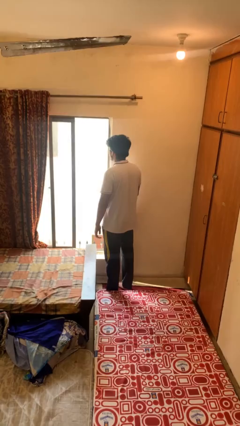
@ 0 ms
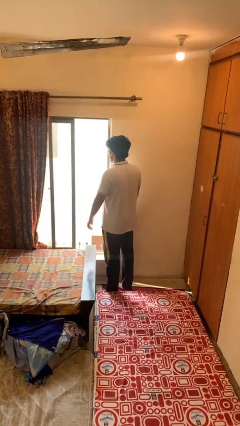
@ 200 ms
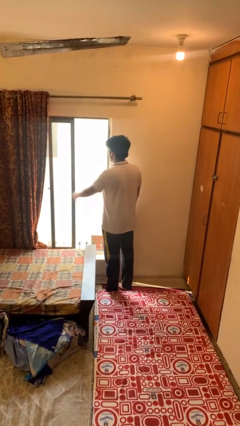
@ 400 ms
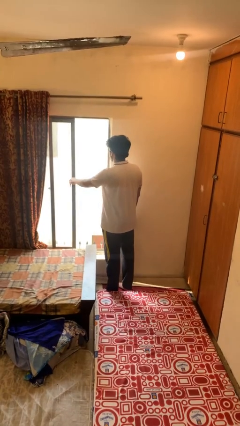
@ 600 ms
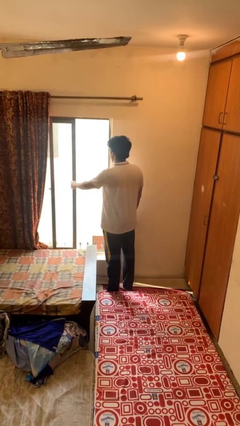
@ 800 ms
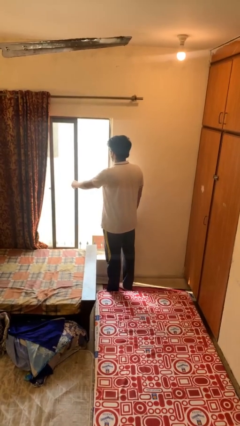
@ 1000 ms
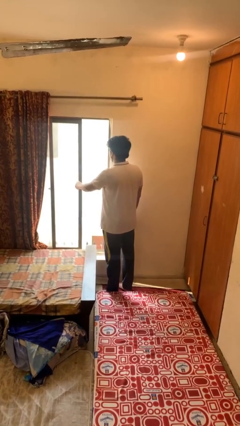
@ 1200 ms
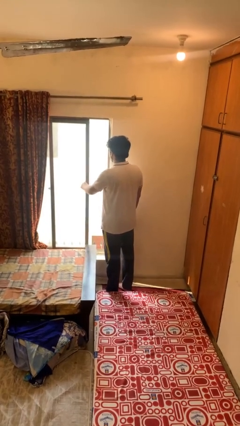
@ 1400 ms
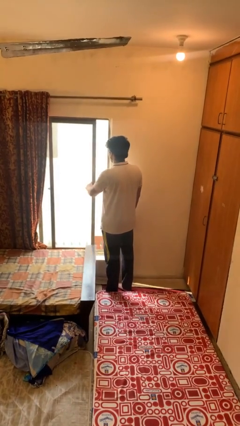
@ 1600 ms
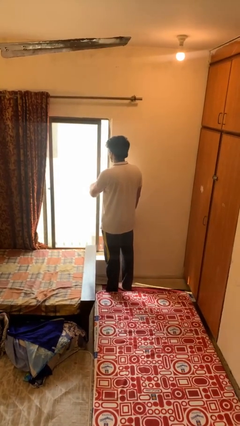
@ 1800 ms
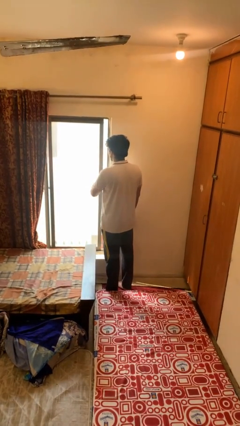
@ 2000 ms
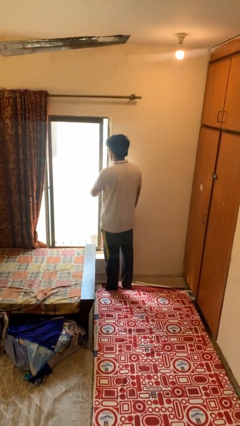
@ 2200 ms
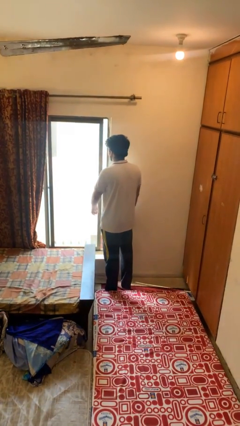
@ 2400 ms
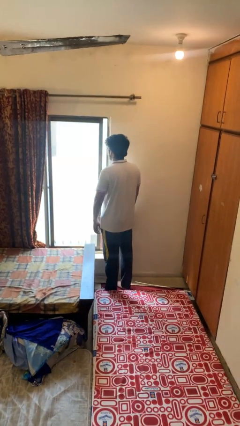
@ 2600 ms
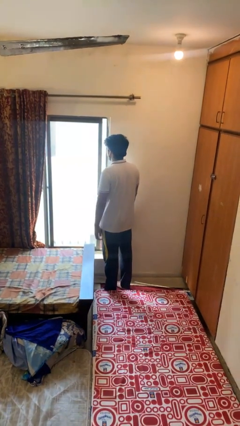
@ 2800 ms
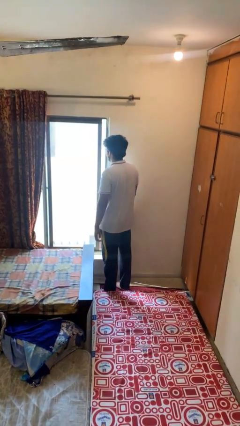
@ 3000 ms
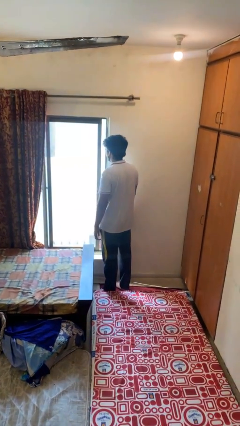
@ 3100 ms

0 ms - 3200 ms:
person closes home window

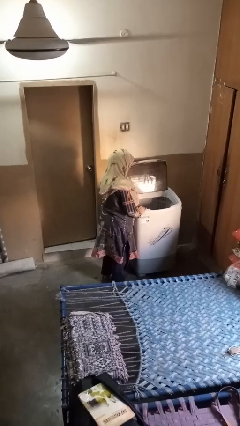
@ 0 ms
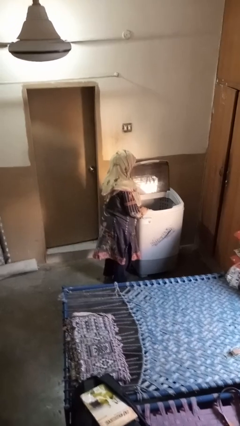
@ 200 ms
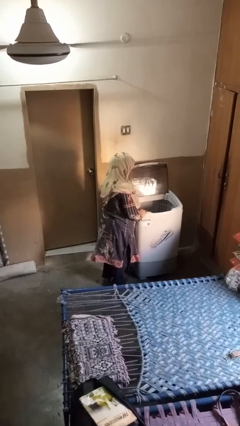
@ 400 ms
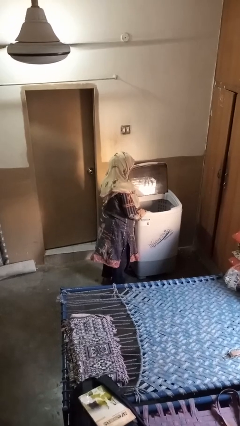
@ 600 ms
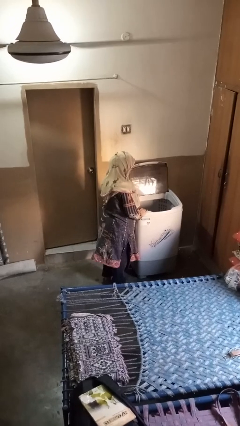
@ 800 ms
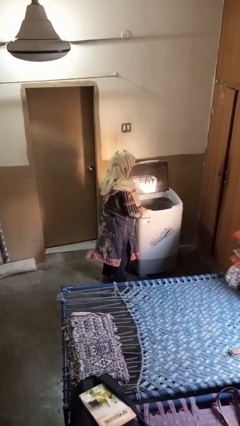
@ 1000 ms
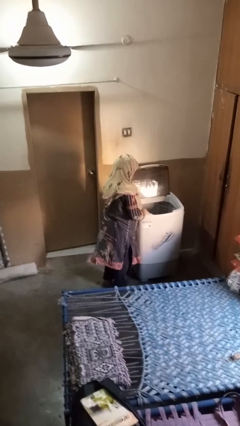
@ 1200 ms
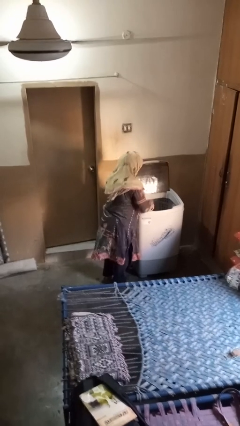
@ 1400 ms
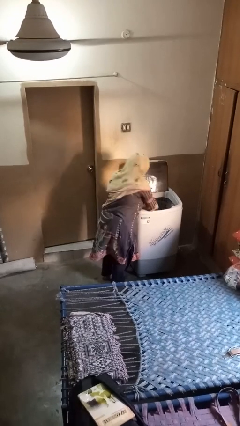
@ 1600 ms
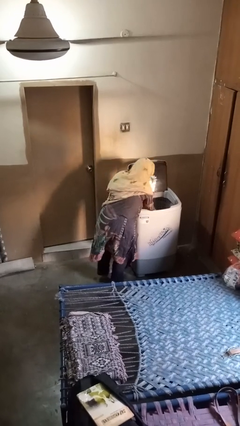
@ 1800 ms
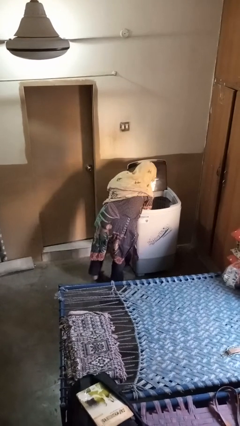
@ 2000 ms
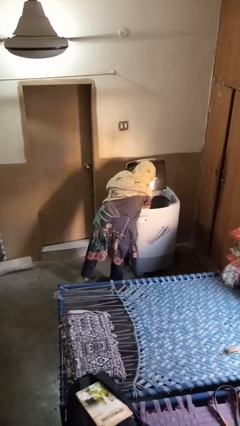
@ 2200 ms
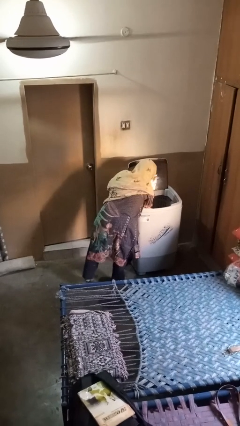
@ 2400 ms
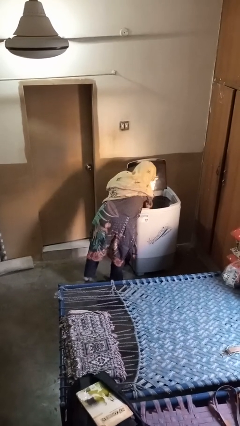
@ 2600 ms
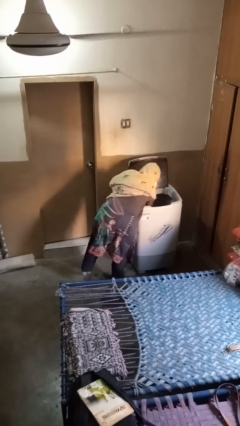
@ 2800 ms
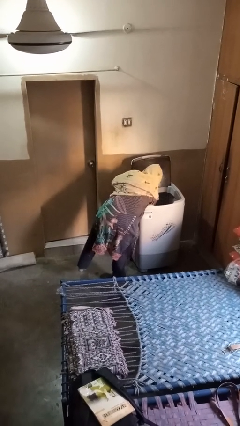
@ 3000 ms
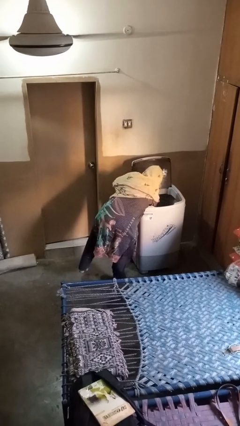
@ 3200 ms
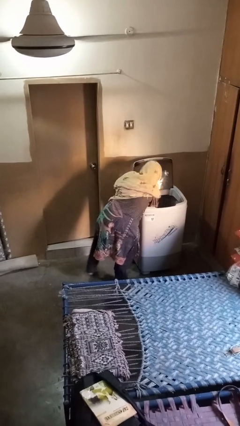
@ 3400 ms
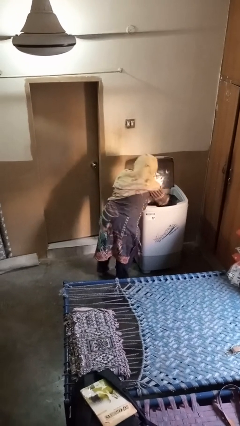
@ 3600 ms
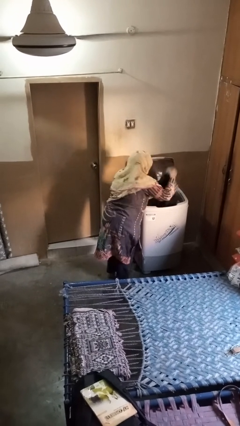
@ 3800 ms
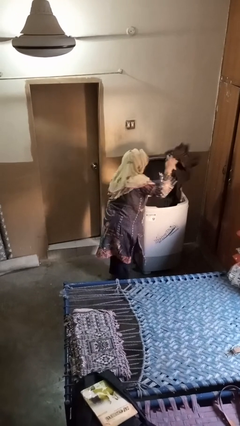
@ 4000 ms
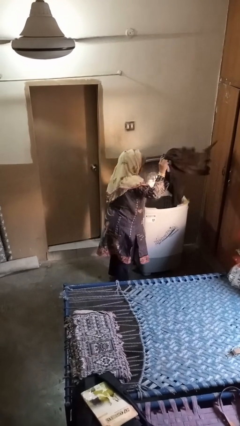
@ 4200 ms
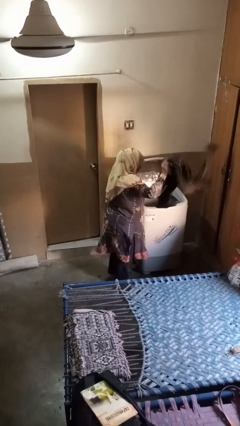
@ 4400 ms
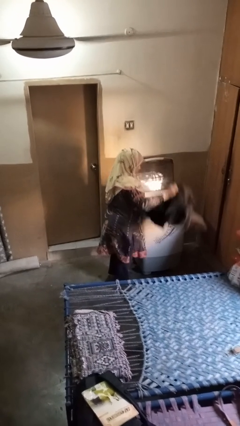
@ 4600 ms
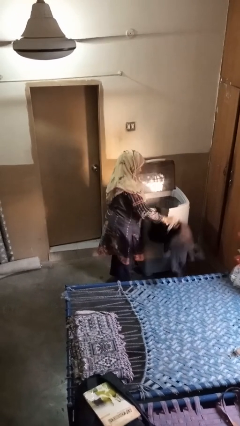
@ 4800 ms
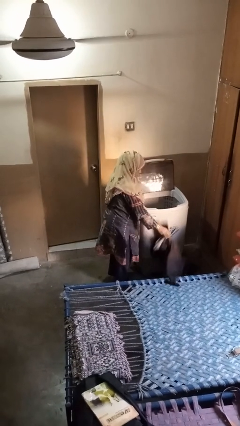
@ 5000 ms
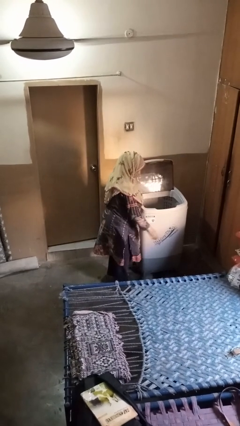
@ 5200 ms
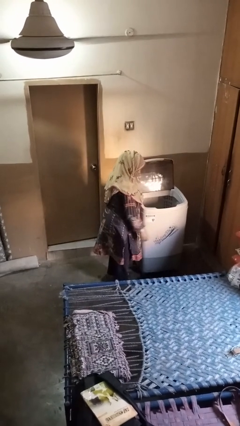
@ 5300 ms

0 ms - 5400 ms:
person unloads clotheswasher

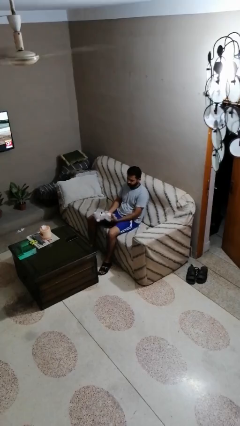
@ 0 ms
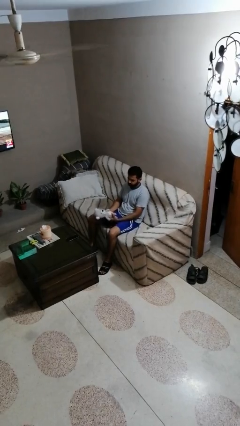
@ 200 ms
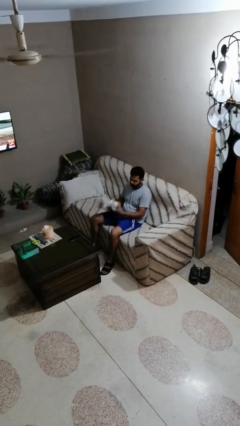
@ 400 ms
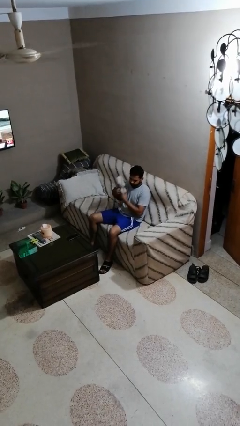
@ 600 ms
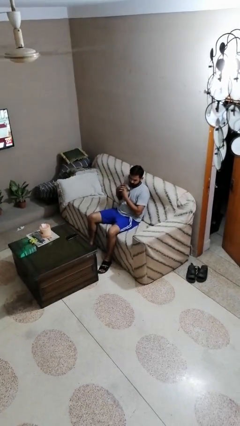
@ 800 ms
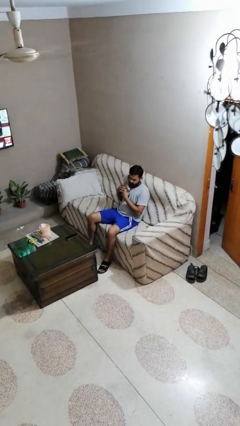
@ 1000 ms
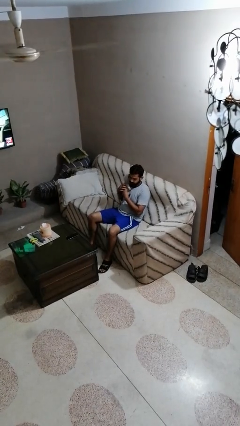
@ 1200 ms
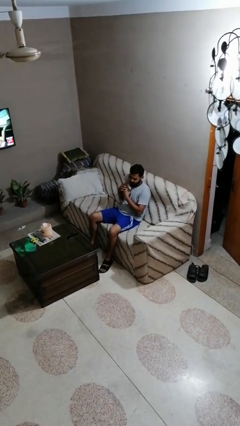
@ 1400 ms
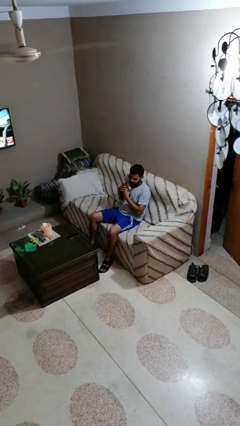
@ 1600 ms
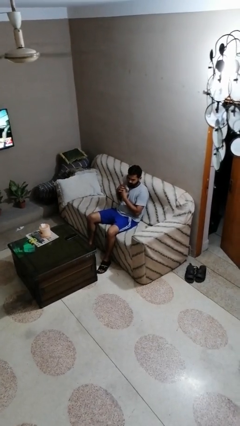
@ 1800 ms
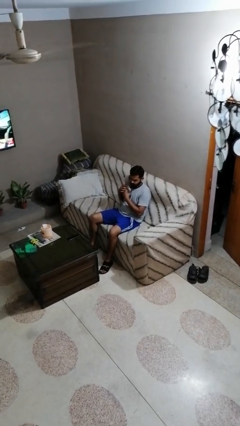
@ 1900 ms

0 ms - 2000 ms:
person hugs stuffed animal

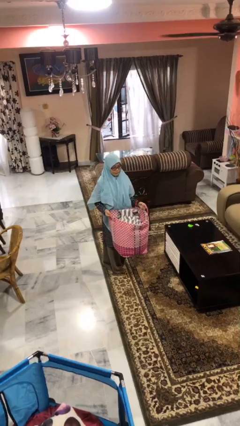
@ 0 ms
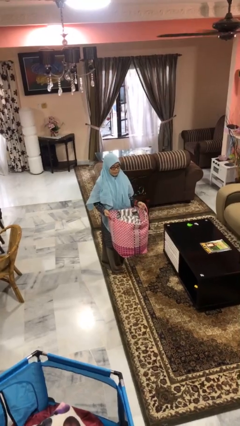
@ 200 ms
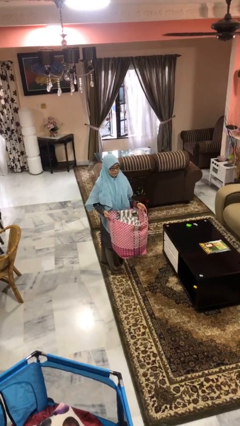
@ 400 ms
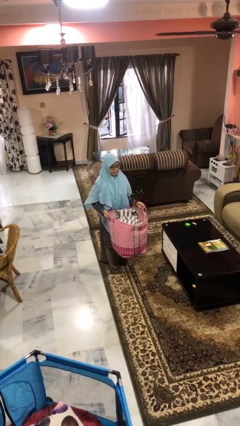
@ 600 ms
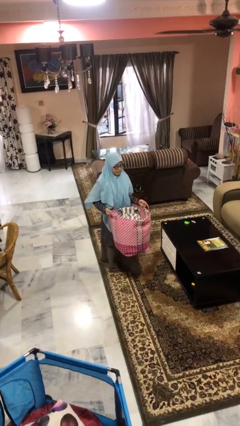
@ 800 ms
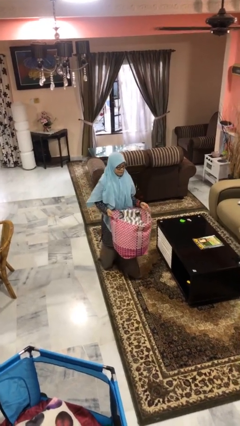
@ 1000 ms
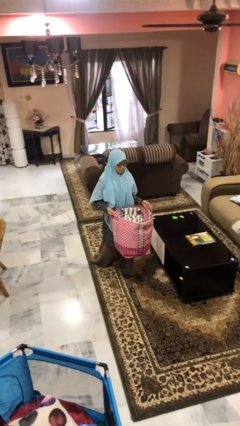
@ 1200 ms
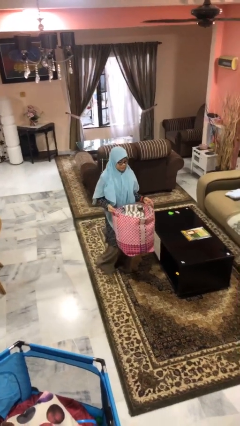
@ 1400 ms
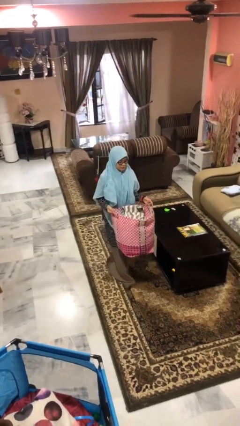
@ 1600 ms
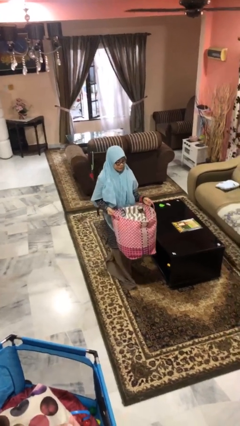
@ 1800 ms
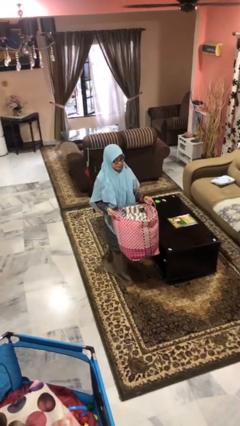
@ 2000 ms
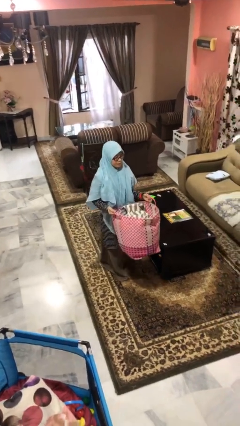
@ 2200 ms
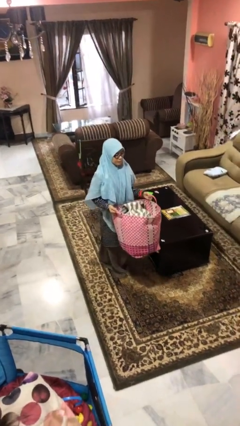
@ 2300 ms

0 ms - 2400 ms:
person carries laundry basket

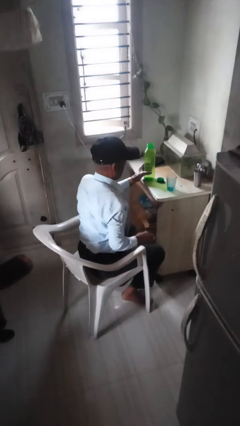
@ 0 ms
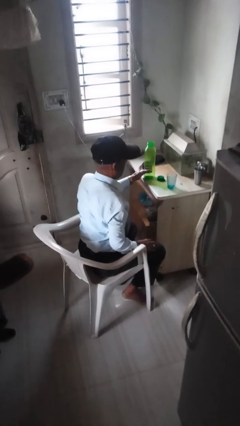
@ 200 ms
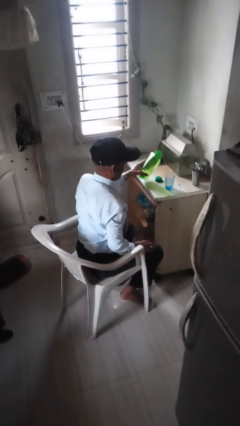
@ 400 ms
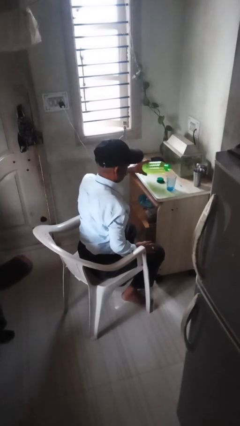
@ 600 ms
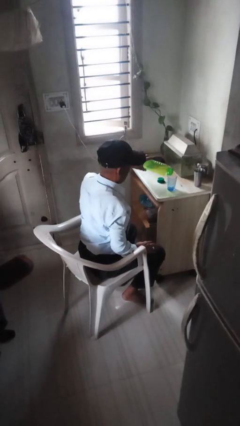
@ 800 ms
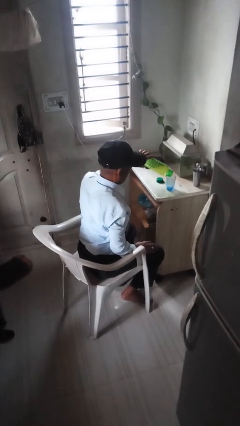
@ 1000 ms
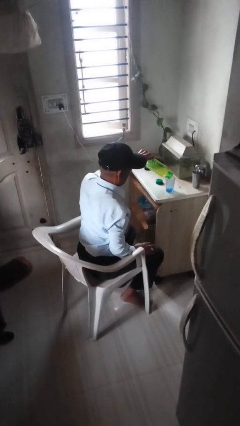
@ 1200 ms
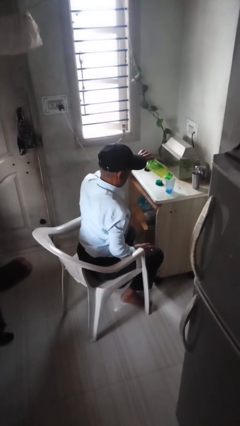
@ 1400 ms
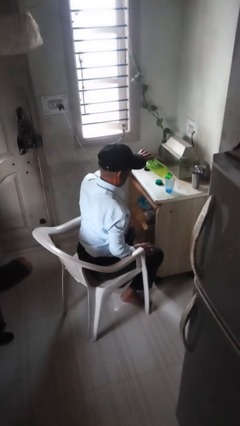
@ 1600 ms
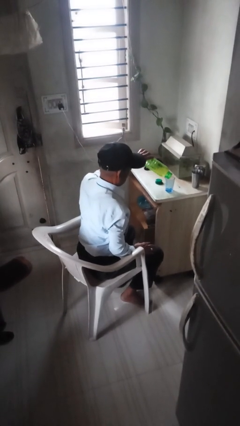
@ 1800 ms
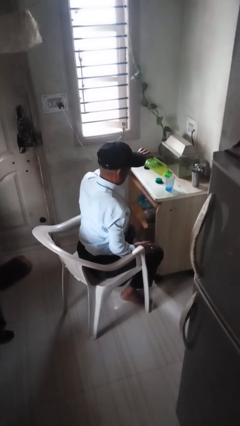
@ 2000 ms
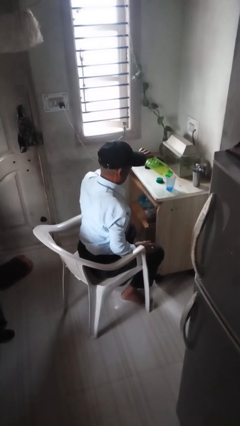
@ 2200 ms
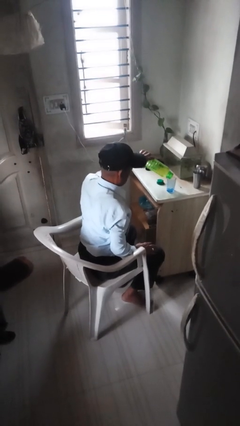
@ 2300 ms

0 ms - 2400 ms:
person pours liquid into cup

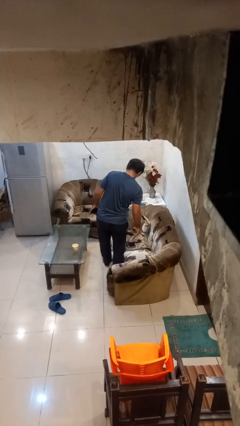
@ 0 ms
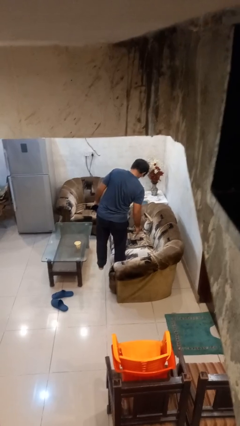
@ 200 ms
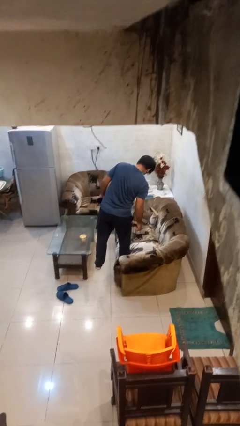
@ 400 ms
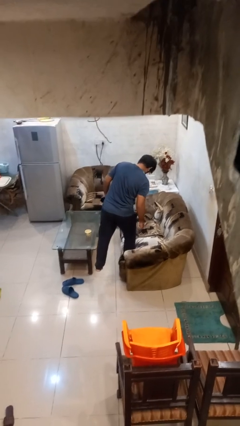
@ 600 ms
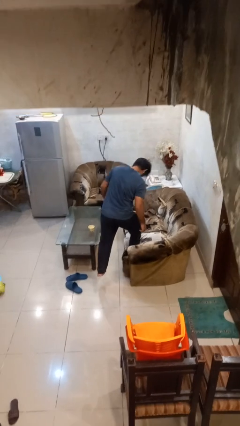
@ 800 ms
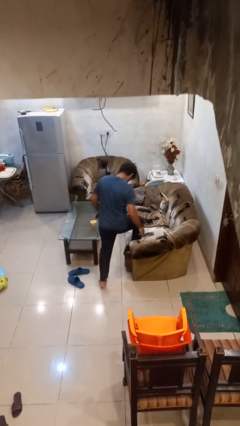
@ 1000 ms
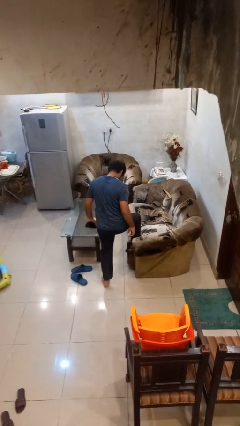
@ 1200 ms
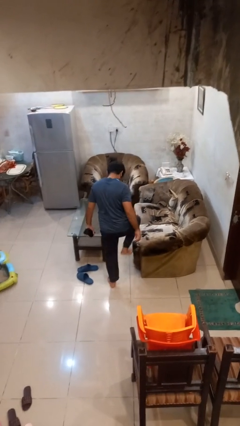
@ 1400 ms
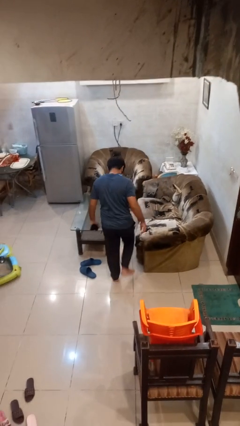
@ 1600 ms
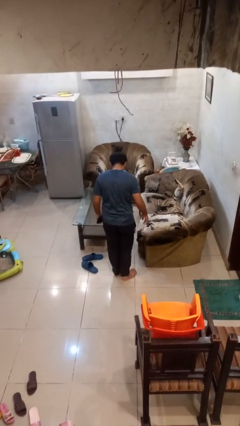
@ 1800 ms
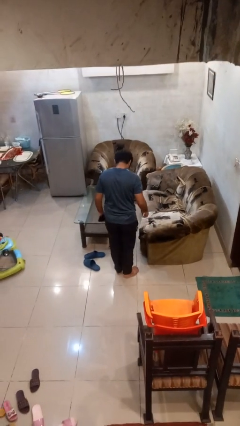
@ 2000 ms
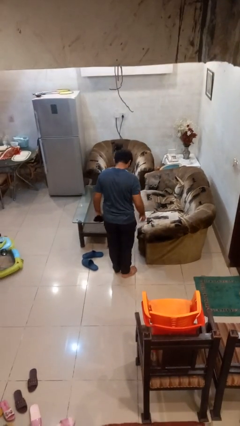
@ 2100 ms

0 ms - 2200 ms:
person climbs off couch
